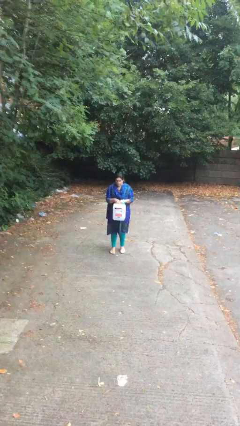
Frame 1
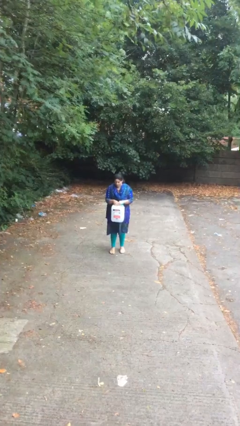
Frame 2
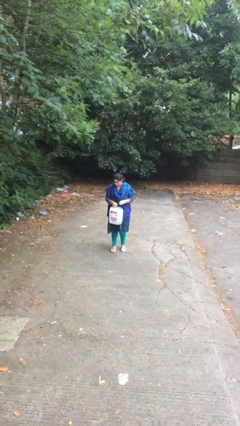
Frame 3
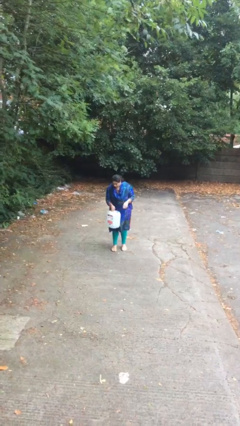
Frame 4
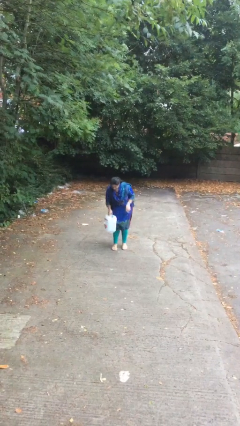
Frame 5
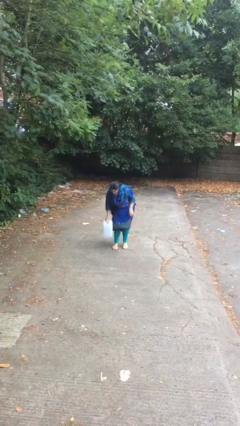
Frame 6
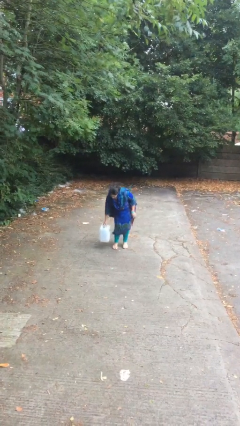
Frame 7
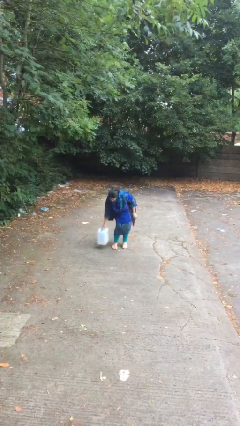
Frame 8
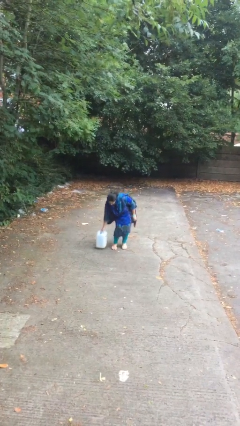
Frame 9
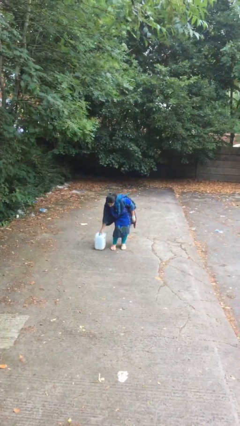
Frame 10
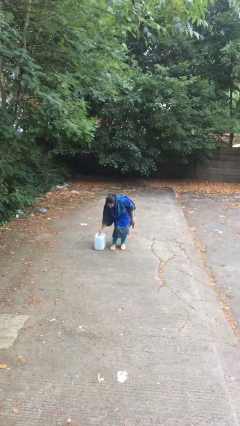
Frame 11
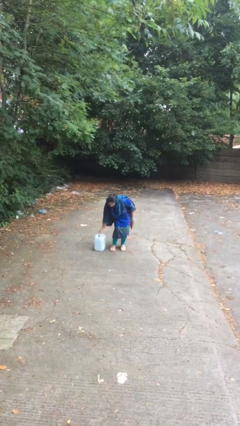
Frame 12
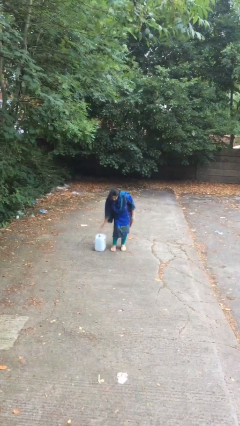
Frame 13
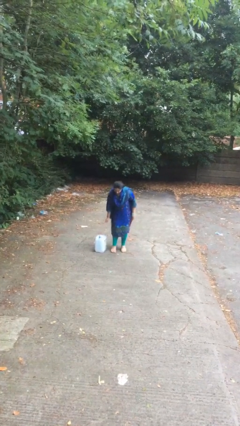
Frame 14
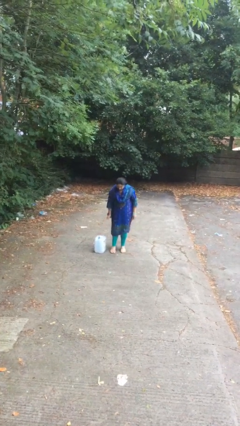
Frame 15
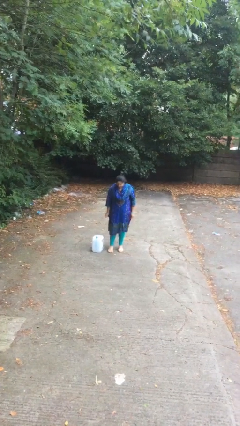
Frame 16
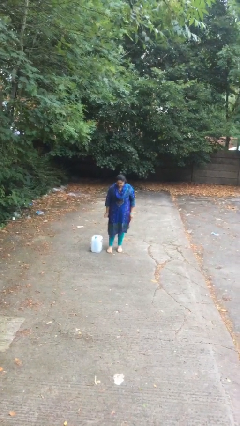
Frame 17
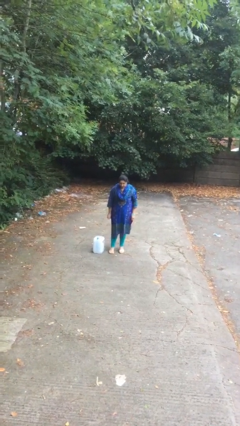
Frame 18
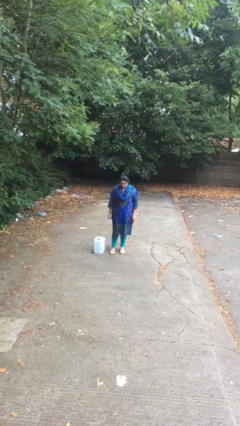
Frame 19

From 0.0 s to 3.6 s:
person puts down object on floor

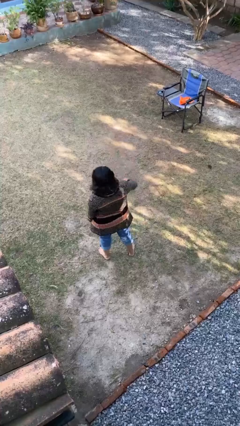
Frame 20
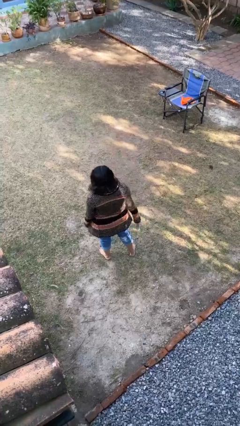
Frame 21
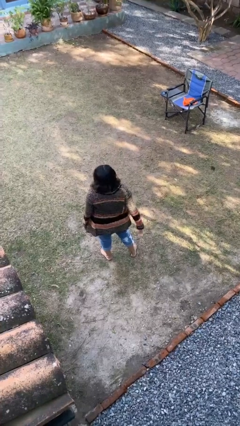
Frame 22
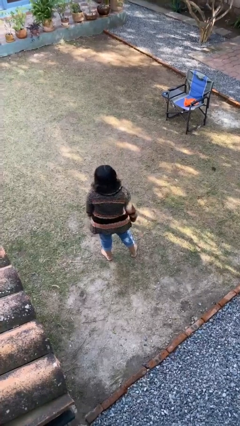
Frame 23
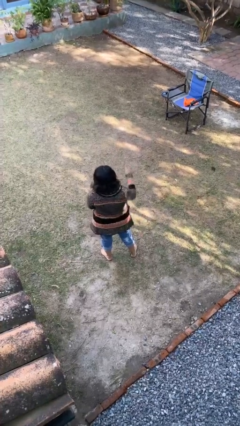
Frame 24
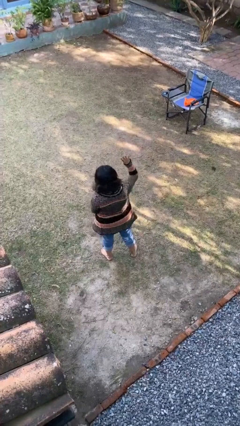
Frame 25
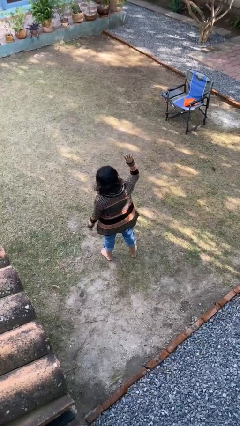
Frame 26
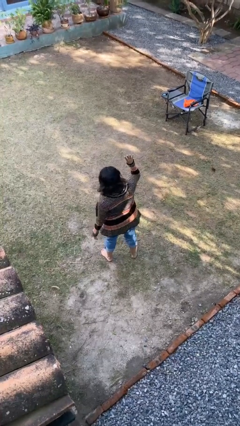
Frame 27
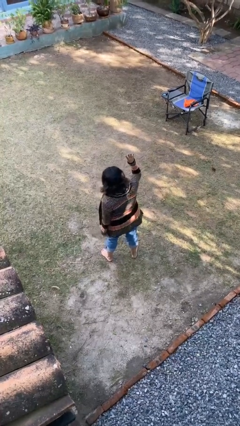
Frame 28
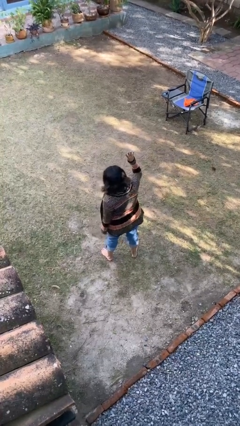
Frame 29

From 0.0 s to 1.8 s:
person gestures number four

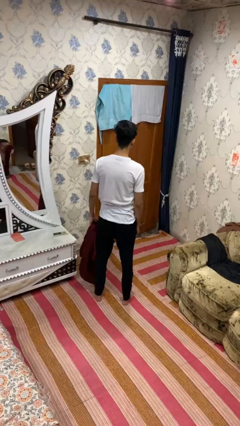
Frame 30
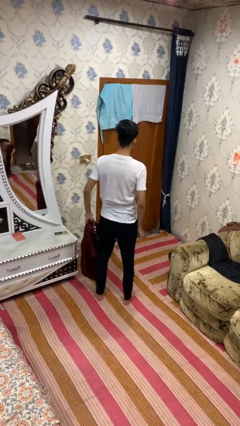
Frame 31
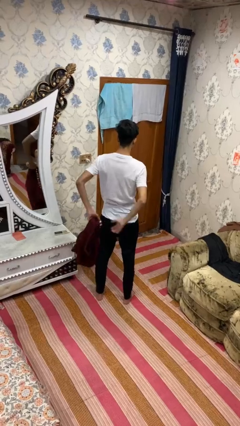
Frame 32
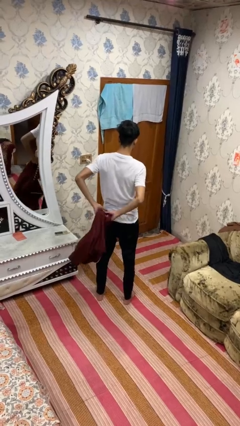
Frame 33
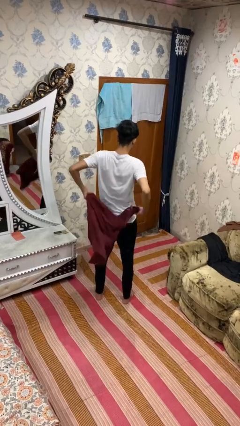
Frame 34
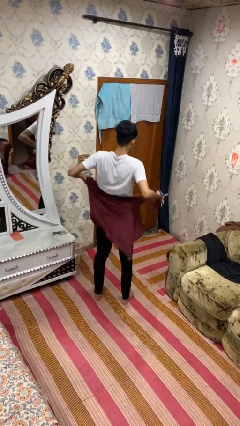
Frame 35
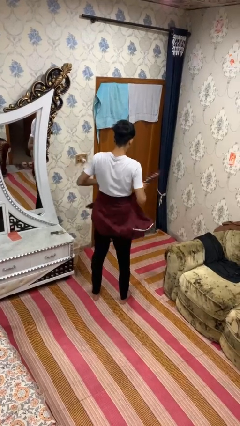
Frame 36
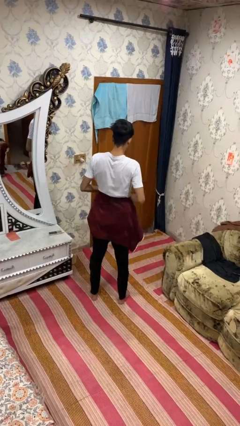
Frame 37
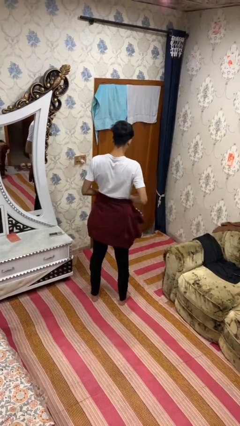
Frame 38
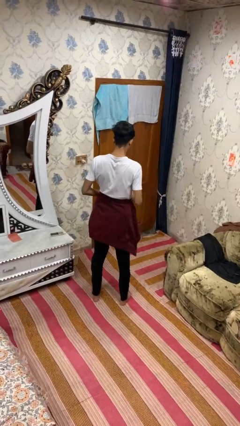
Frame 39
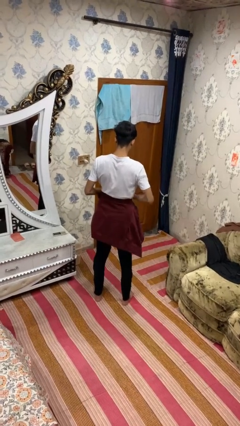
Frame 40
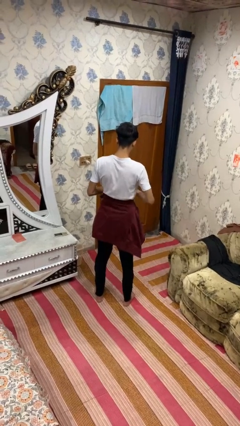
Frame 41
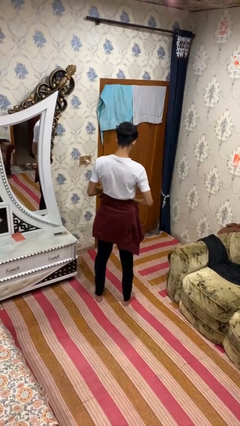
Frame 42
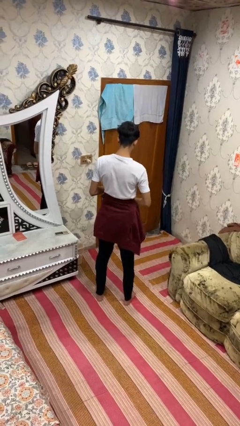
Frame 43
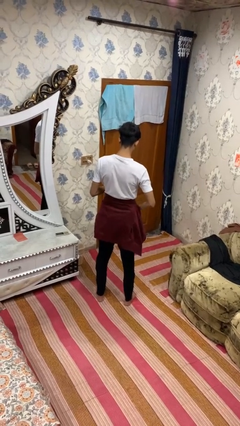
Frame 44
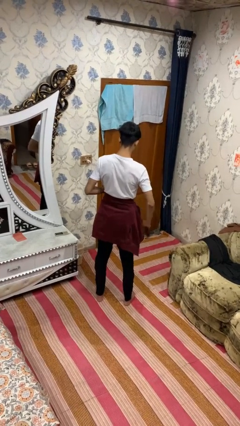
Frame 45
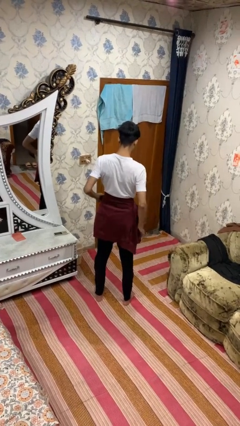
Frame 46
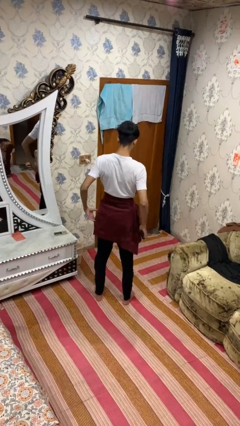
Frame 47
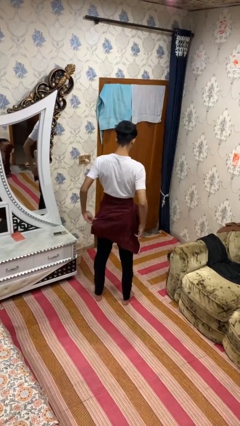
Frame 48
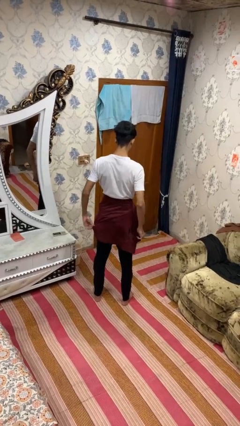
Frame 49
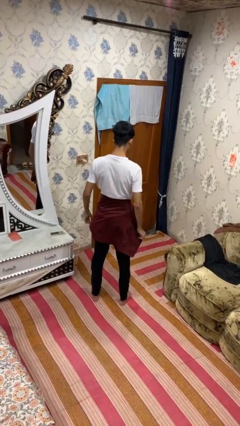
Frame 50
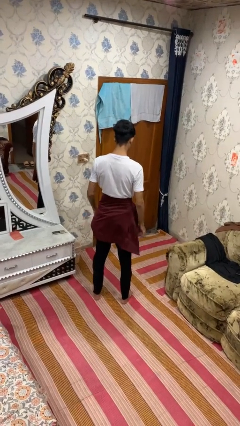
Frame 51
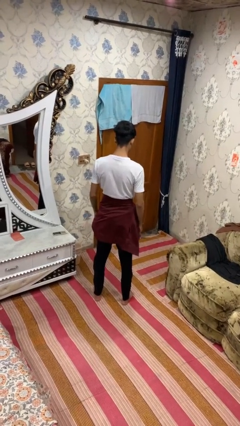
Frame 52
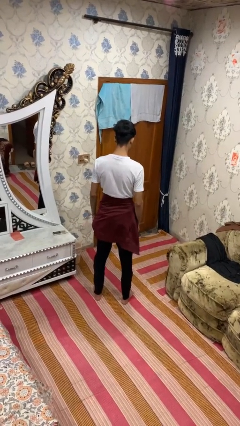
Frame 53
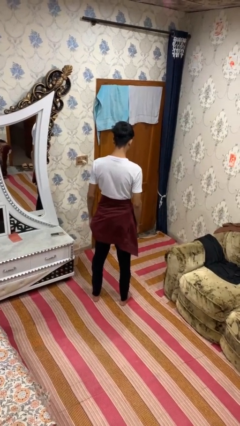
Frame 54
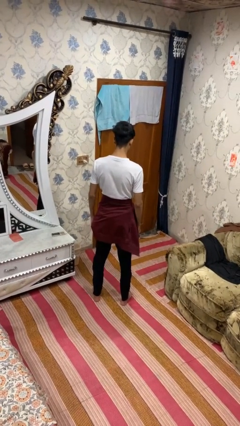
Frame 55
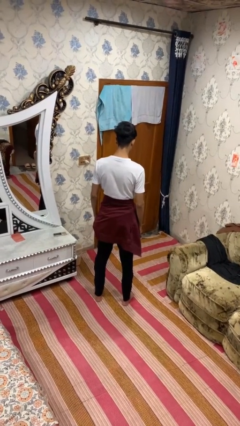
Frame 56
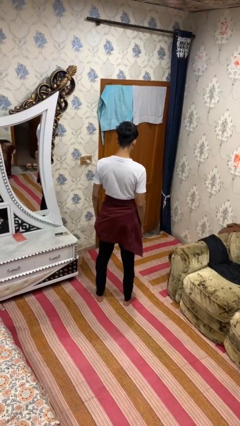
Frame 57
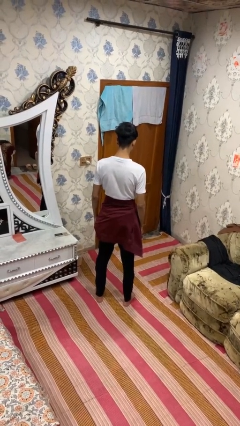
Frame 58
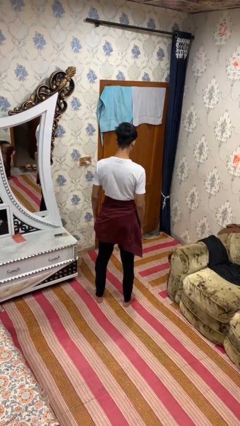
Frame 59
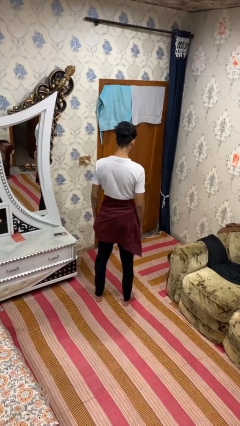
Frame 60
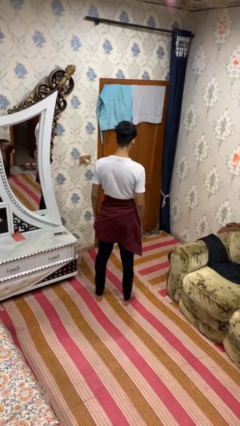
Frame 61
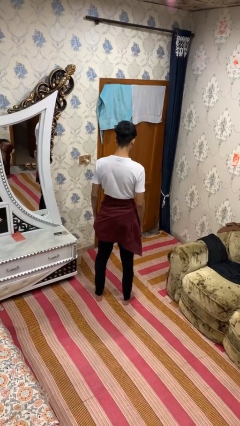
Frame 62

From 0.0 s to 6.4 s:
person ties jacket around waist

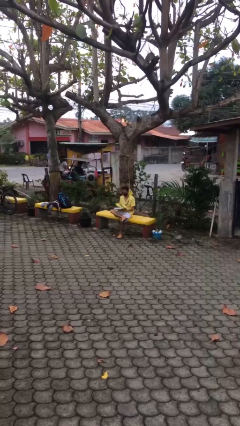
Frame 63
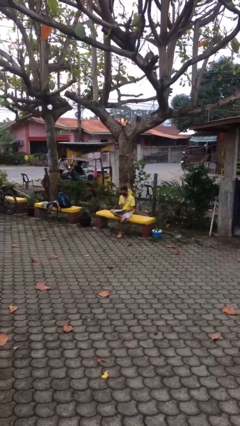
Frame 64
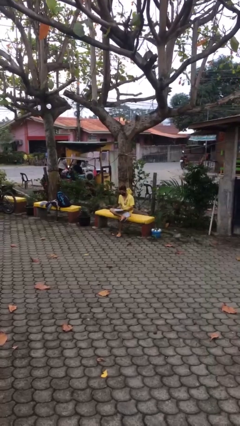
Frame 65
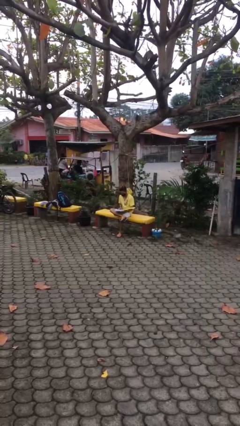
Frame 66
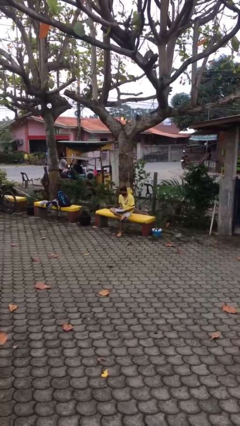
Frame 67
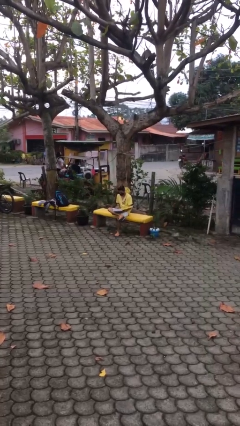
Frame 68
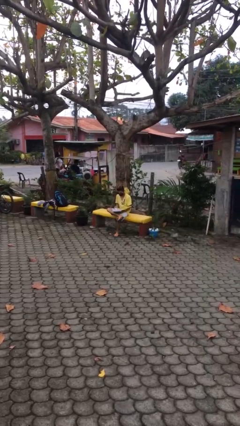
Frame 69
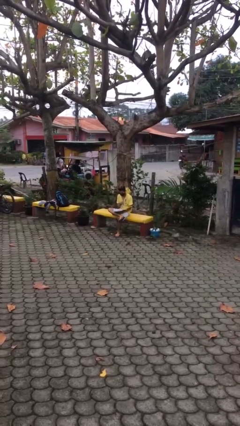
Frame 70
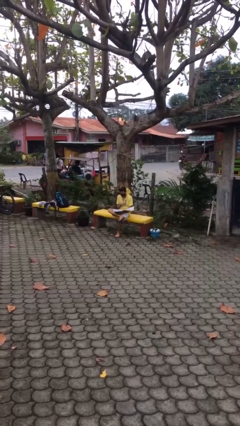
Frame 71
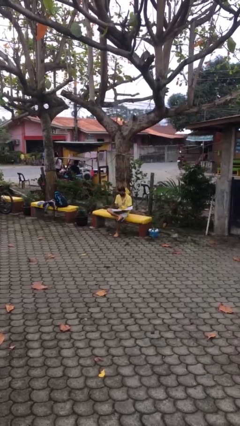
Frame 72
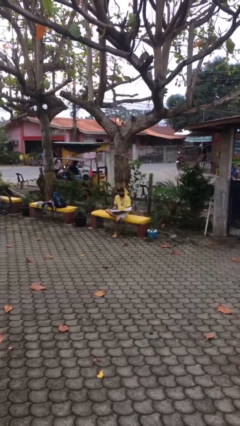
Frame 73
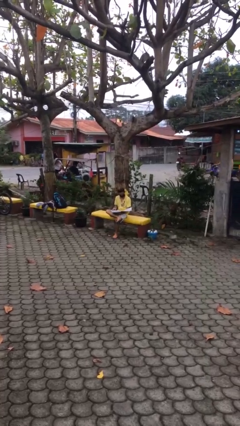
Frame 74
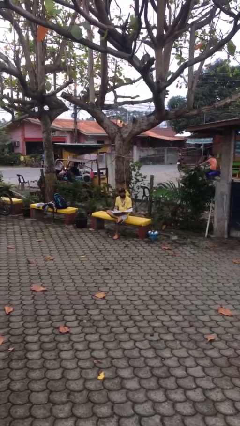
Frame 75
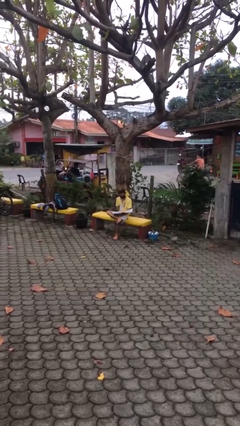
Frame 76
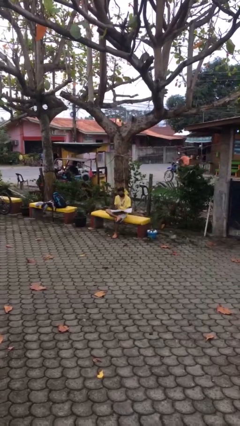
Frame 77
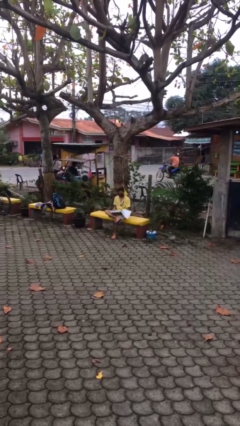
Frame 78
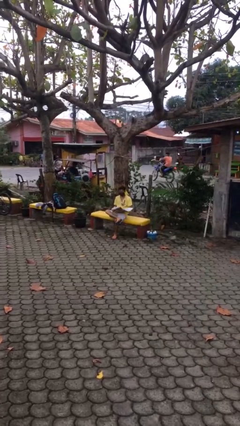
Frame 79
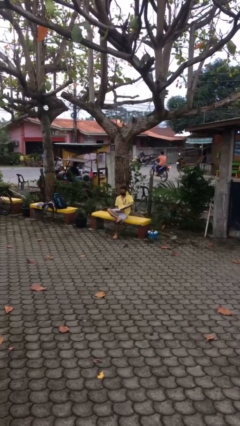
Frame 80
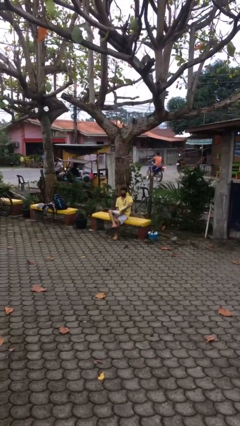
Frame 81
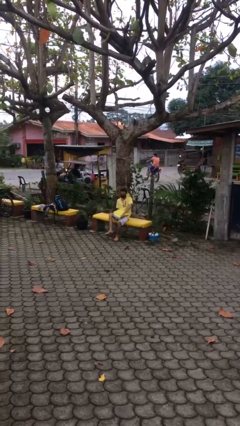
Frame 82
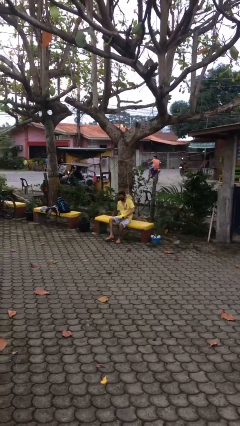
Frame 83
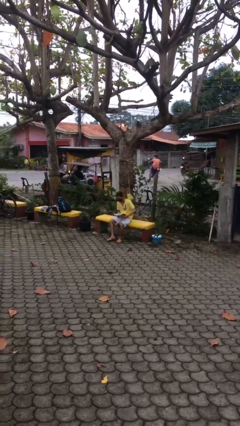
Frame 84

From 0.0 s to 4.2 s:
person reads document

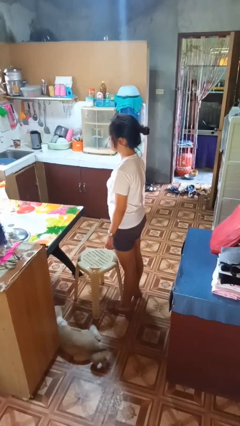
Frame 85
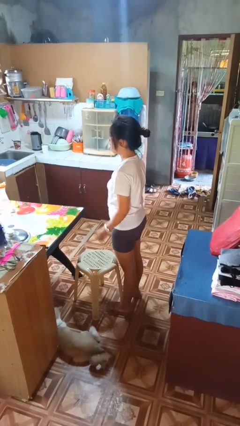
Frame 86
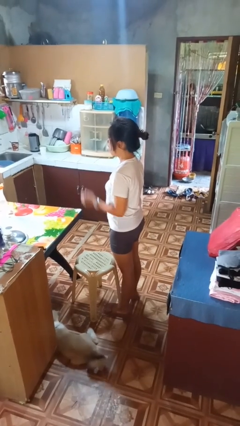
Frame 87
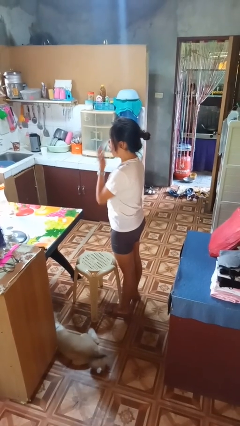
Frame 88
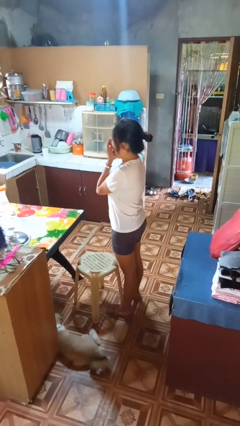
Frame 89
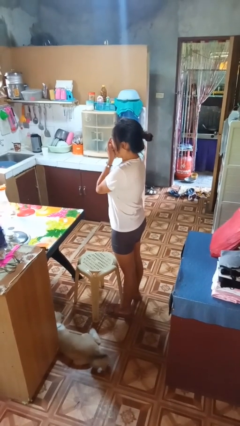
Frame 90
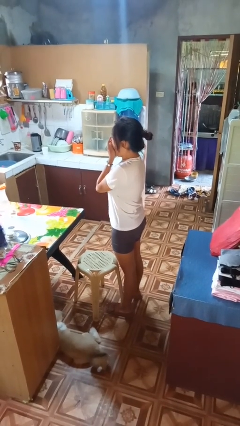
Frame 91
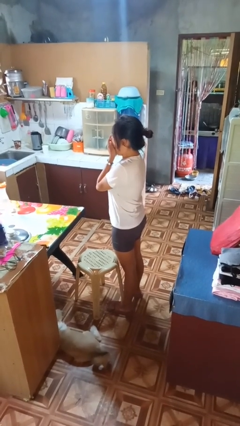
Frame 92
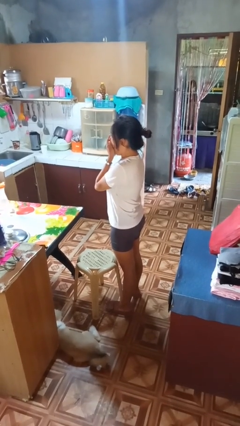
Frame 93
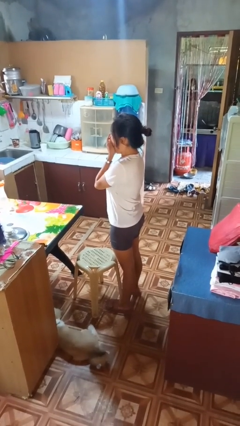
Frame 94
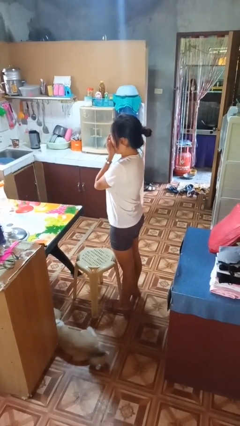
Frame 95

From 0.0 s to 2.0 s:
person yawns
